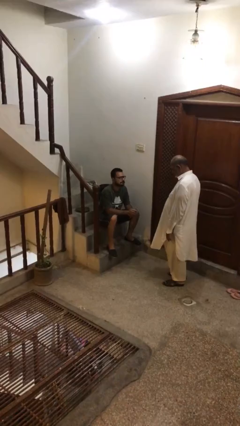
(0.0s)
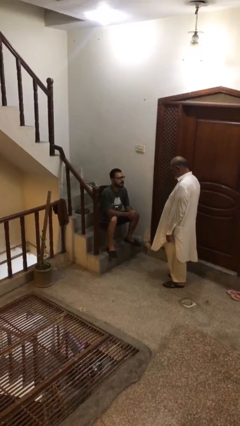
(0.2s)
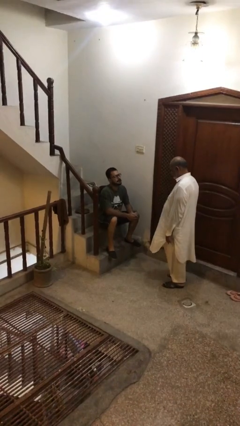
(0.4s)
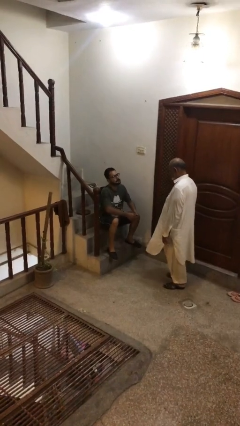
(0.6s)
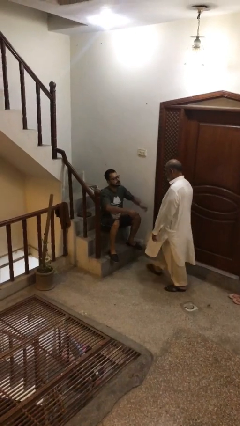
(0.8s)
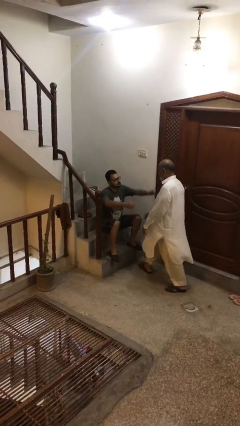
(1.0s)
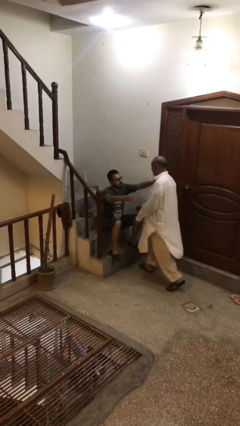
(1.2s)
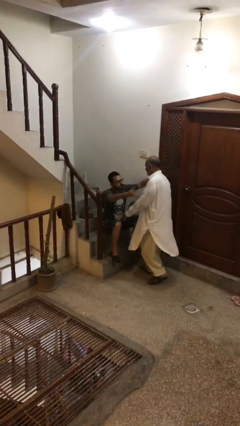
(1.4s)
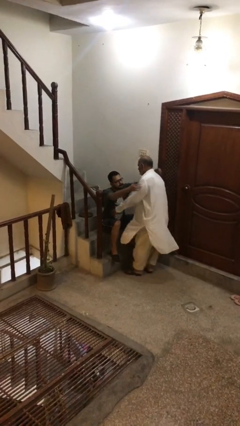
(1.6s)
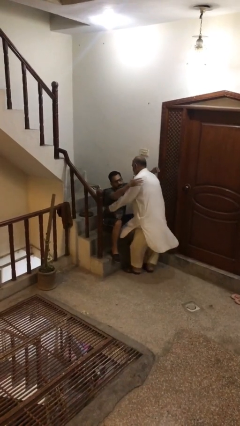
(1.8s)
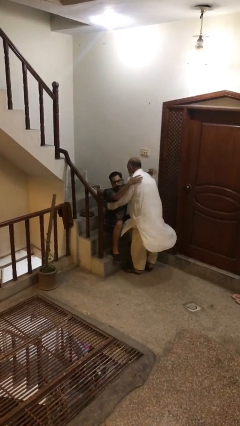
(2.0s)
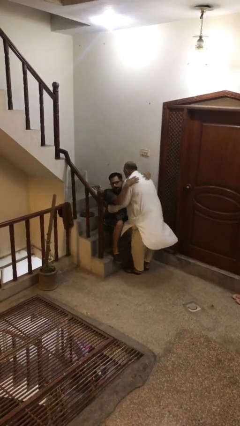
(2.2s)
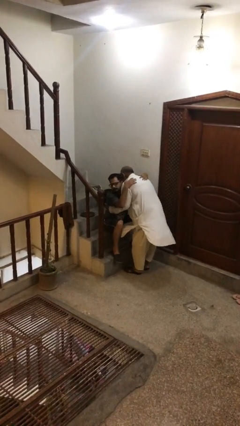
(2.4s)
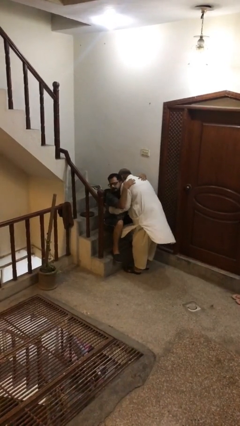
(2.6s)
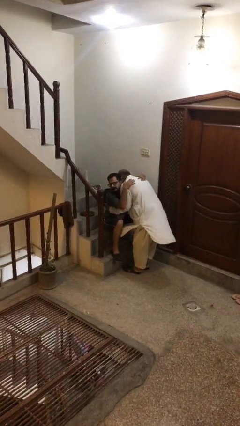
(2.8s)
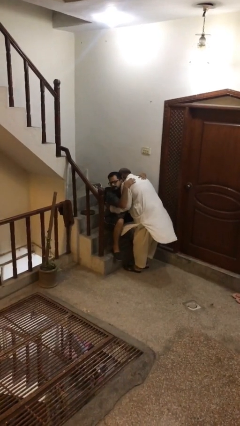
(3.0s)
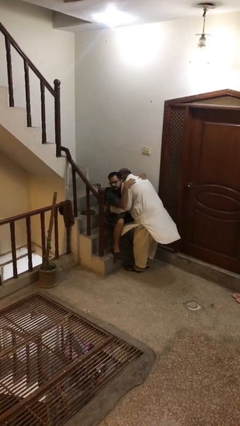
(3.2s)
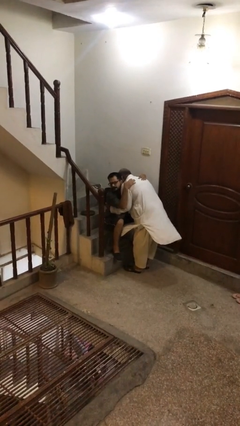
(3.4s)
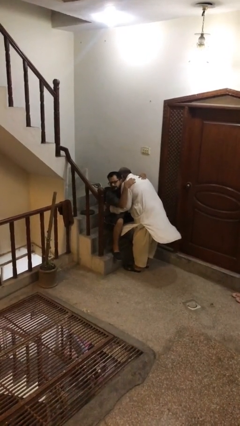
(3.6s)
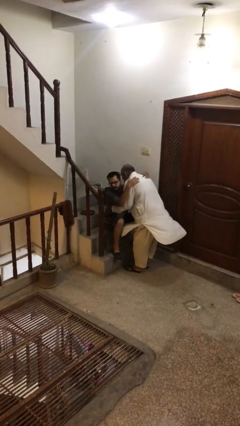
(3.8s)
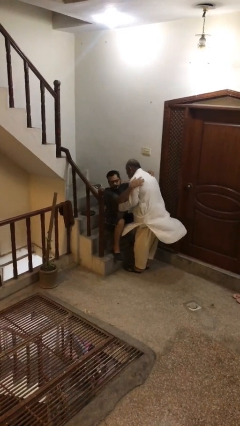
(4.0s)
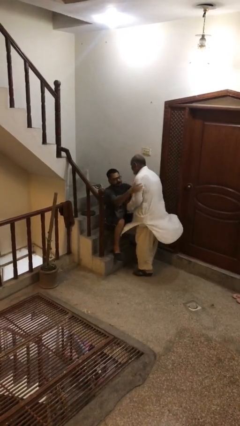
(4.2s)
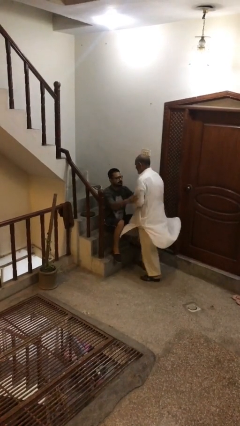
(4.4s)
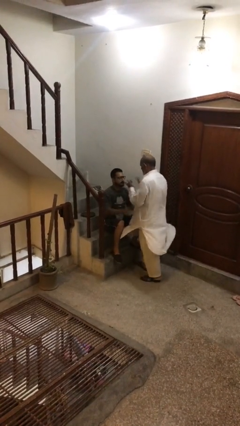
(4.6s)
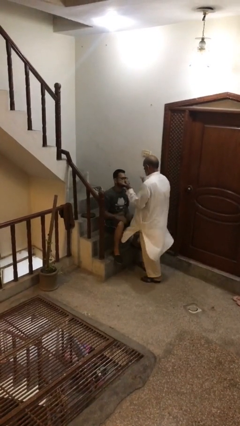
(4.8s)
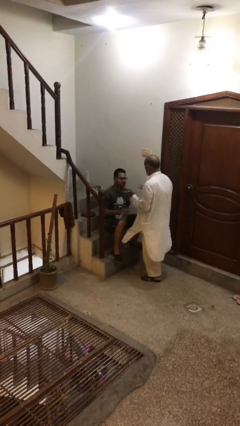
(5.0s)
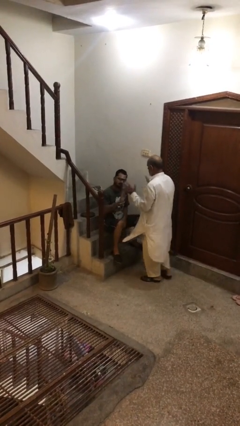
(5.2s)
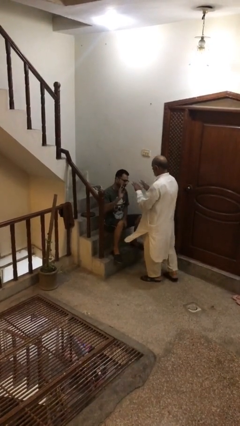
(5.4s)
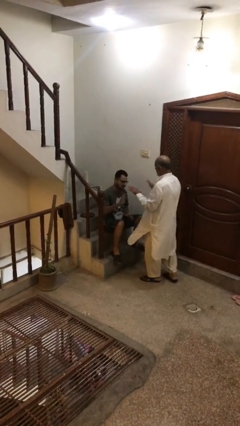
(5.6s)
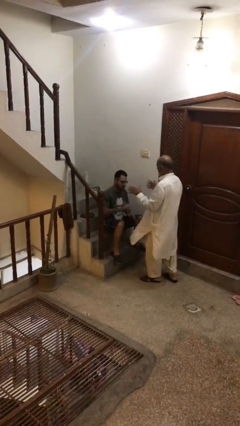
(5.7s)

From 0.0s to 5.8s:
person embraces person

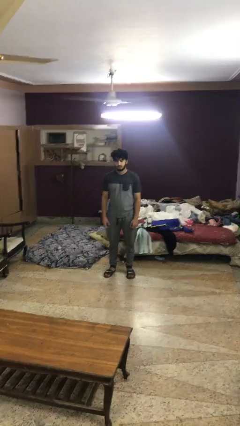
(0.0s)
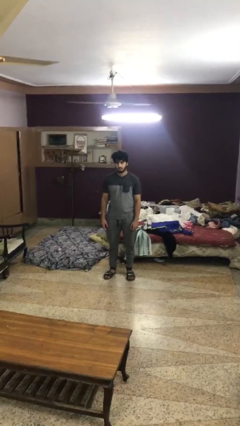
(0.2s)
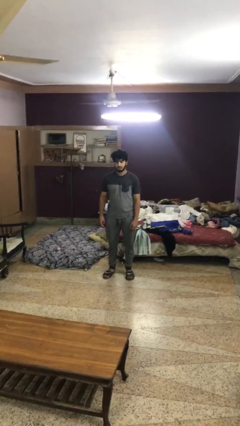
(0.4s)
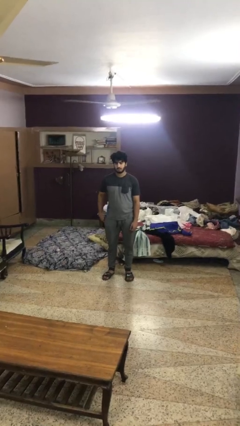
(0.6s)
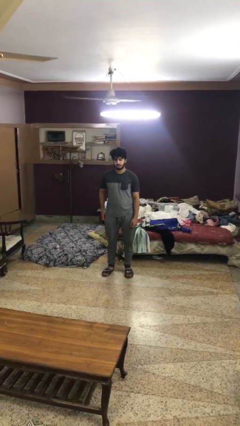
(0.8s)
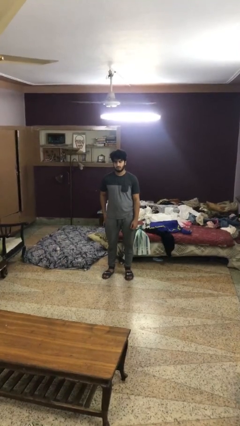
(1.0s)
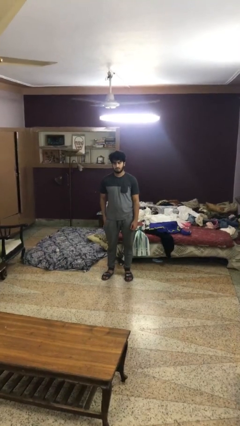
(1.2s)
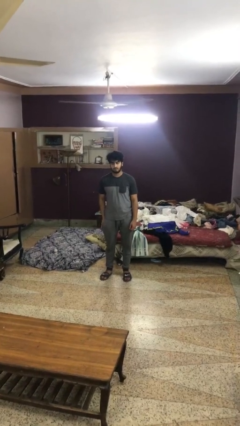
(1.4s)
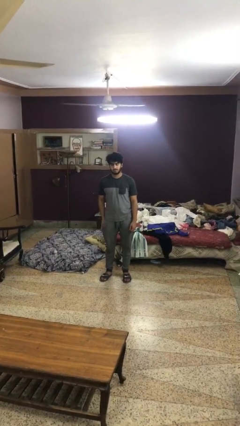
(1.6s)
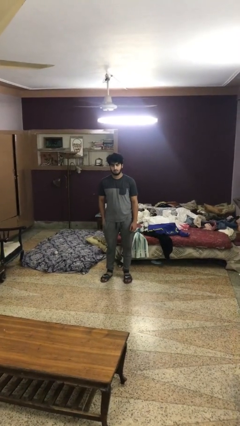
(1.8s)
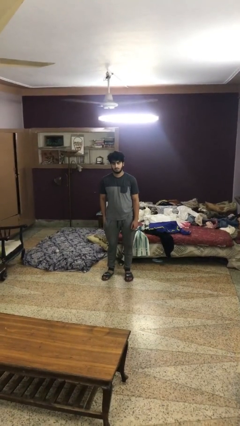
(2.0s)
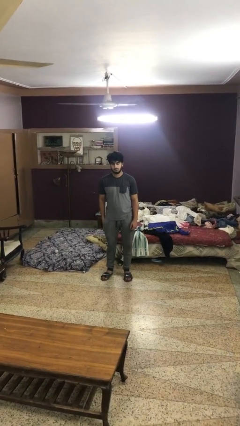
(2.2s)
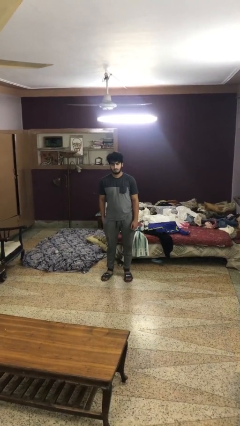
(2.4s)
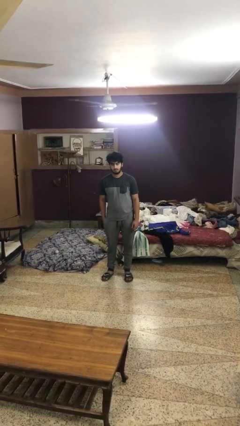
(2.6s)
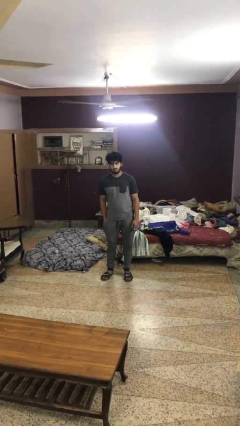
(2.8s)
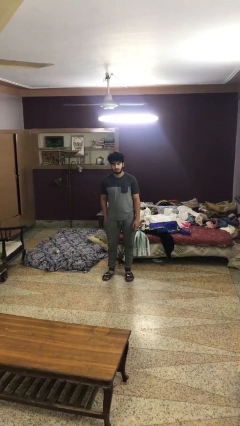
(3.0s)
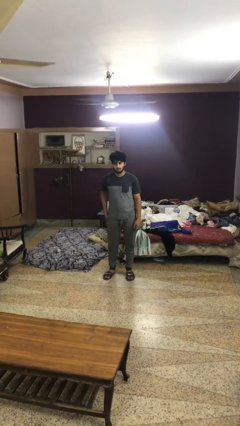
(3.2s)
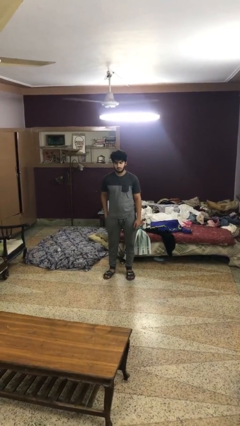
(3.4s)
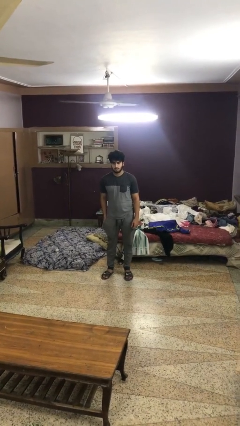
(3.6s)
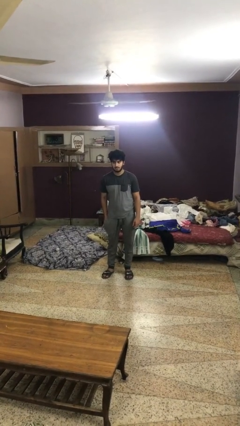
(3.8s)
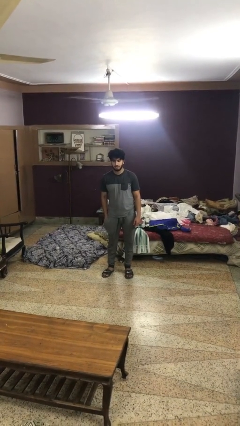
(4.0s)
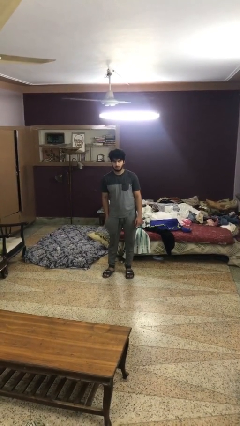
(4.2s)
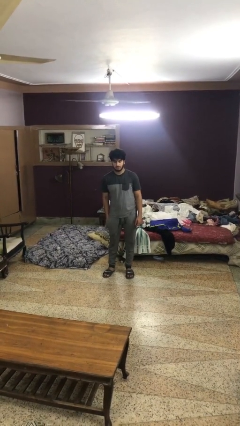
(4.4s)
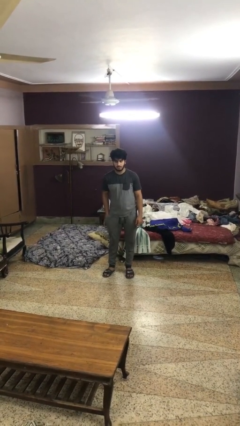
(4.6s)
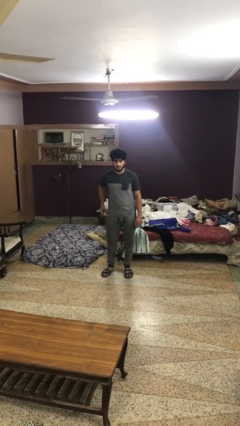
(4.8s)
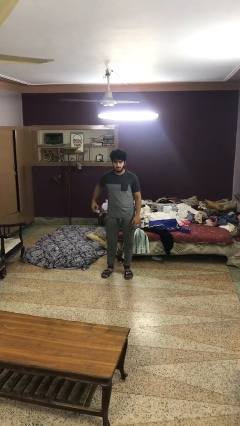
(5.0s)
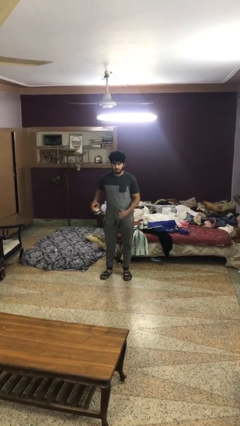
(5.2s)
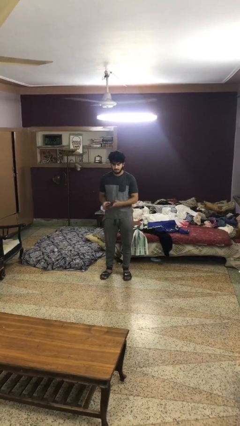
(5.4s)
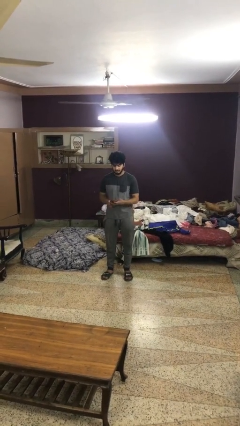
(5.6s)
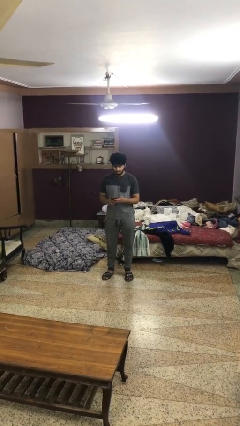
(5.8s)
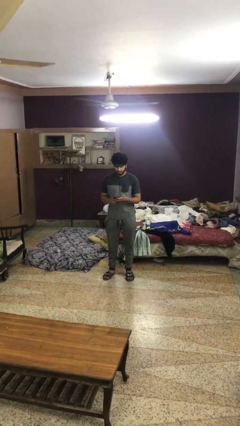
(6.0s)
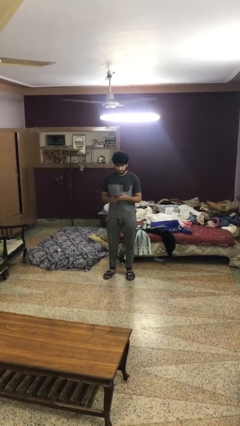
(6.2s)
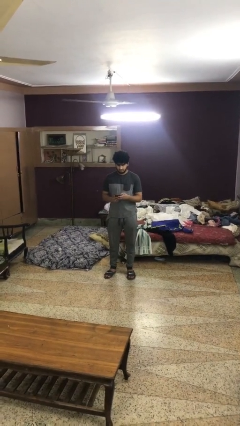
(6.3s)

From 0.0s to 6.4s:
person takes phone from pocket

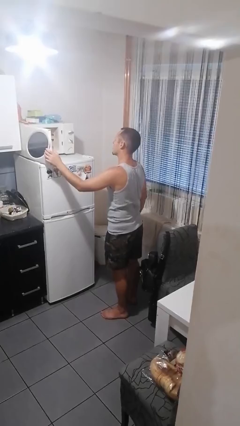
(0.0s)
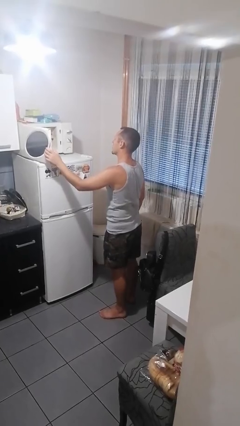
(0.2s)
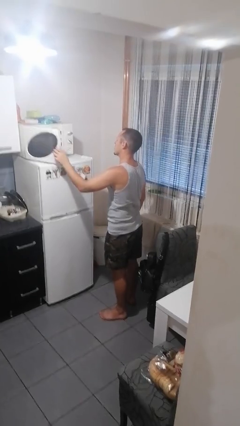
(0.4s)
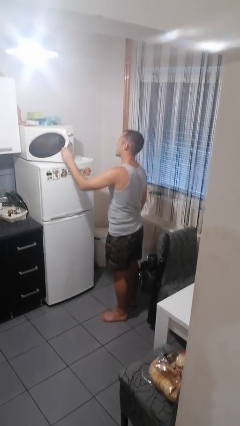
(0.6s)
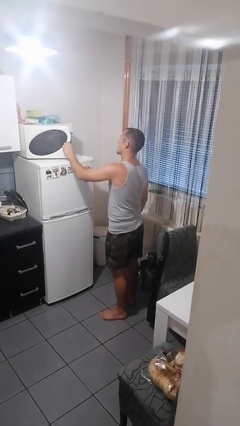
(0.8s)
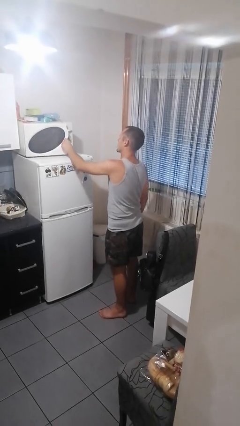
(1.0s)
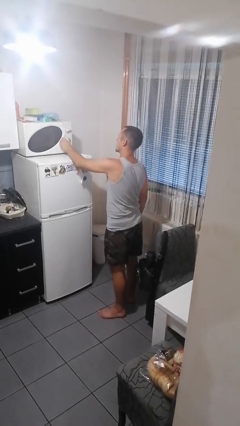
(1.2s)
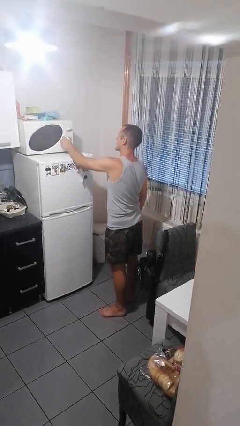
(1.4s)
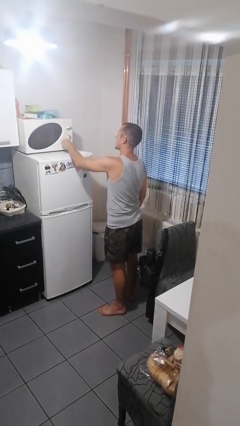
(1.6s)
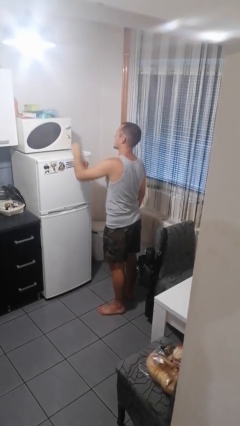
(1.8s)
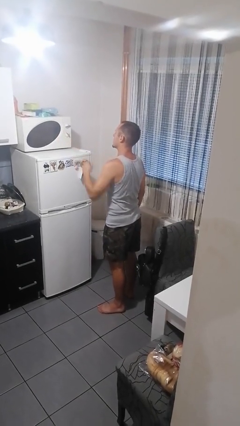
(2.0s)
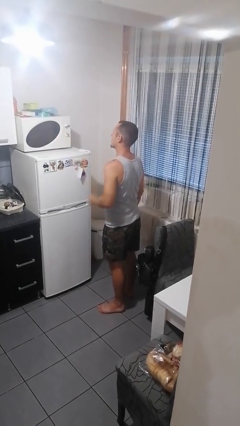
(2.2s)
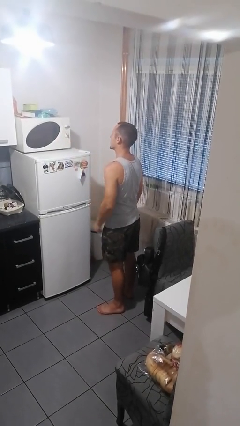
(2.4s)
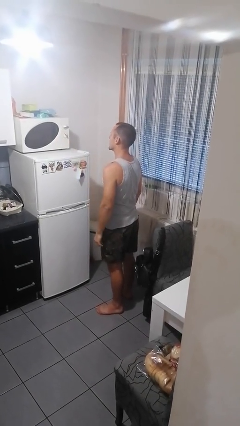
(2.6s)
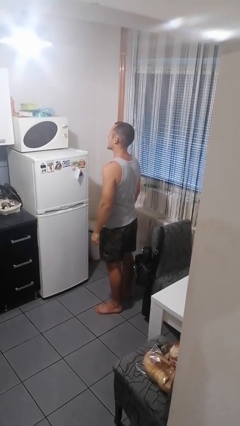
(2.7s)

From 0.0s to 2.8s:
person closes microwave

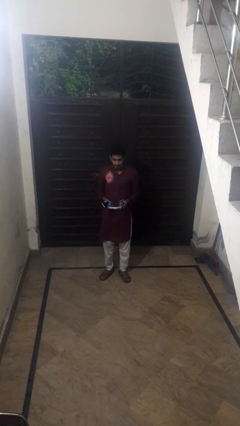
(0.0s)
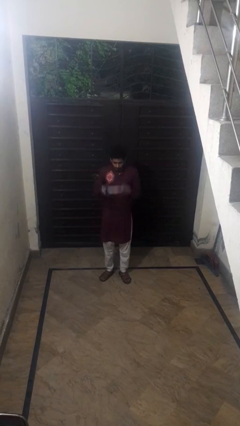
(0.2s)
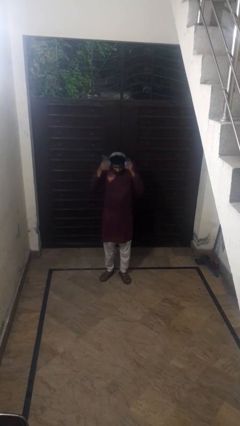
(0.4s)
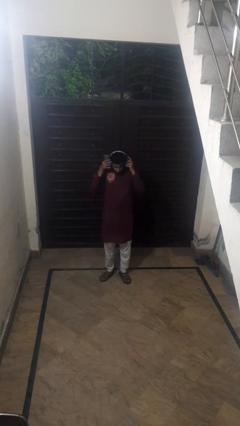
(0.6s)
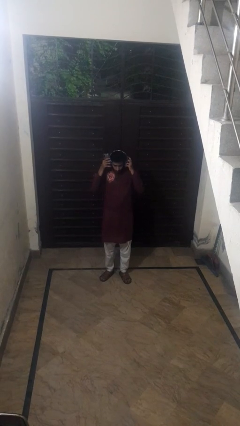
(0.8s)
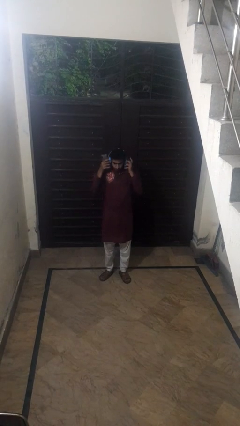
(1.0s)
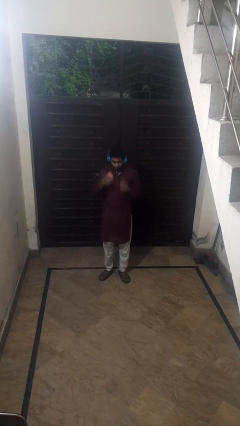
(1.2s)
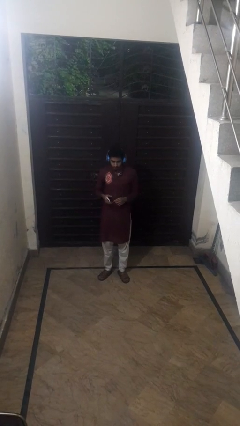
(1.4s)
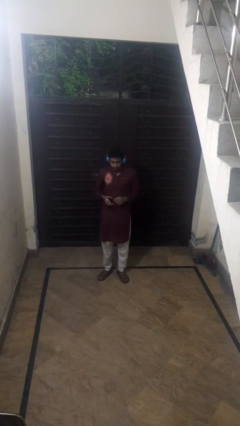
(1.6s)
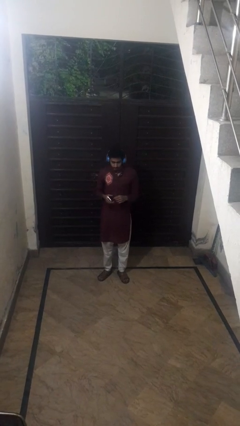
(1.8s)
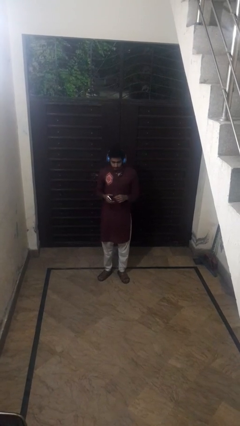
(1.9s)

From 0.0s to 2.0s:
person puts on headphones

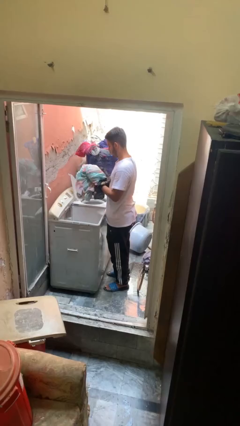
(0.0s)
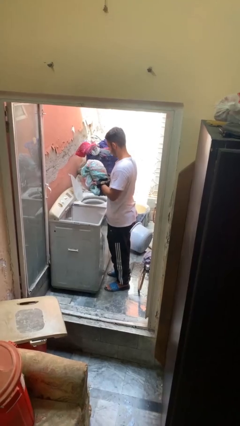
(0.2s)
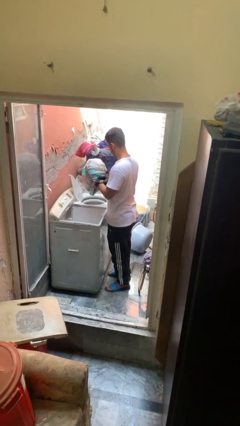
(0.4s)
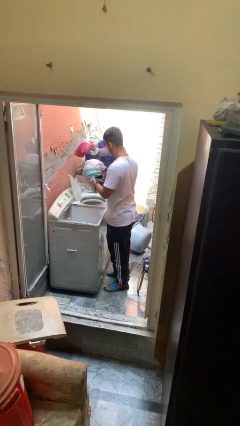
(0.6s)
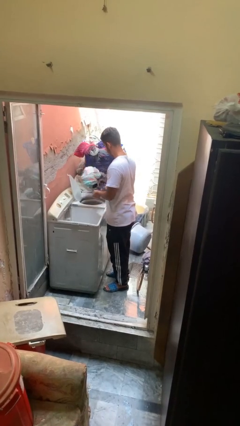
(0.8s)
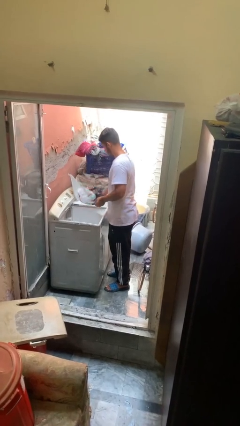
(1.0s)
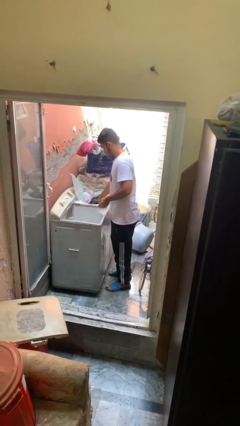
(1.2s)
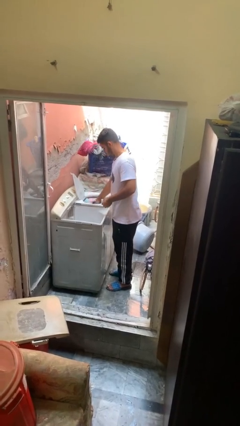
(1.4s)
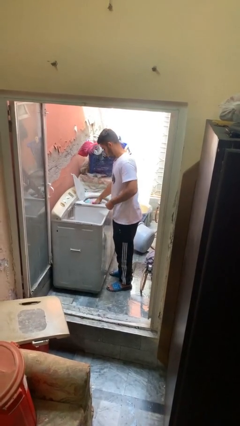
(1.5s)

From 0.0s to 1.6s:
person loads dryer
